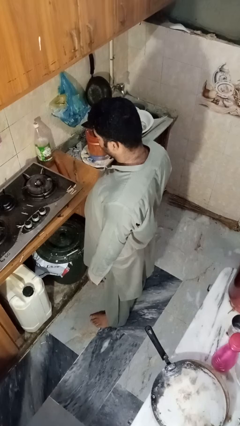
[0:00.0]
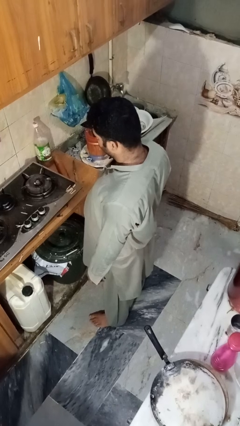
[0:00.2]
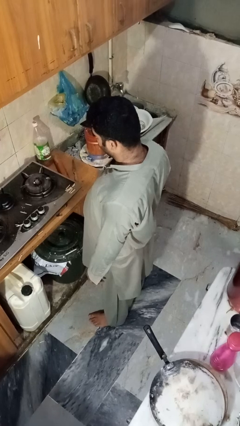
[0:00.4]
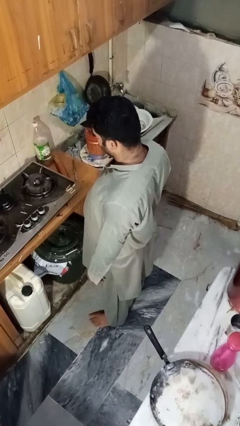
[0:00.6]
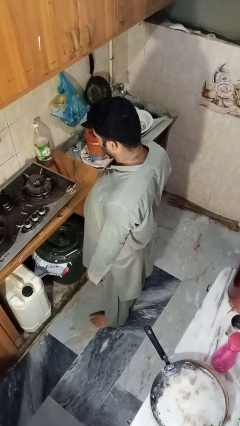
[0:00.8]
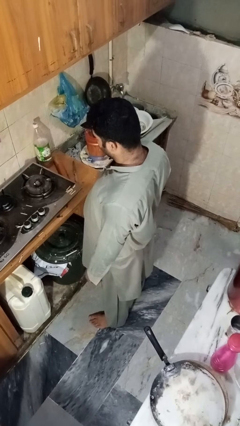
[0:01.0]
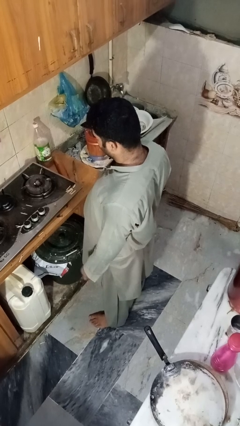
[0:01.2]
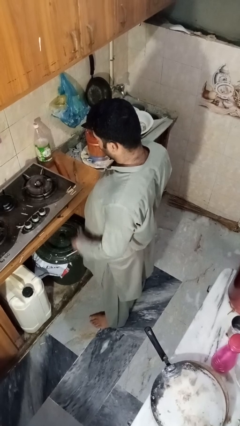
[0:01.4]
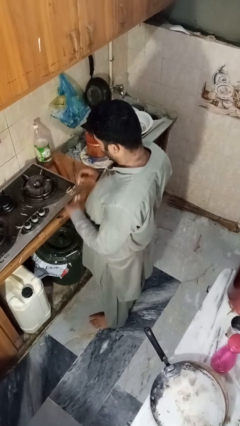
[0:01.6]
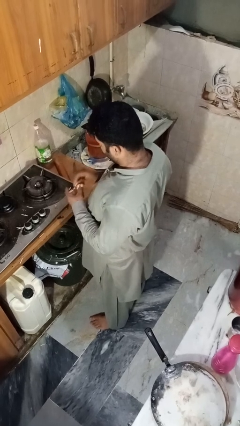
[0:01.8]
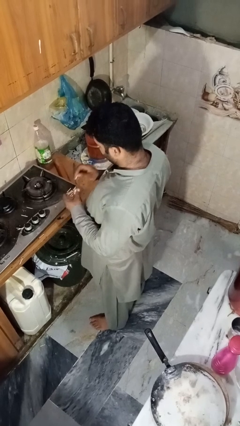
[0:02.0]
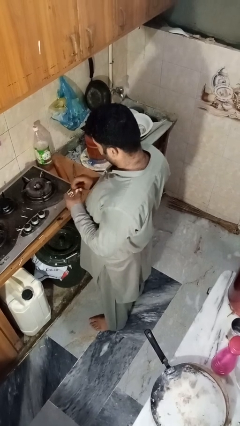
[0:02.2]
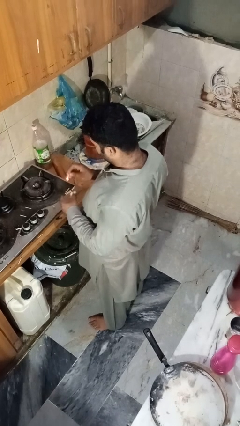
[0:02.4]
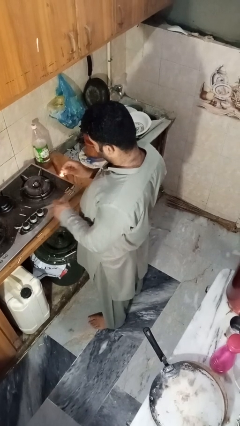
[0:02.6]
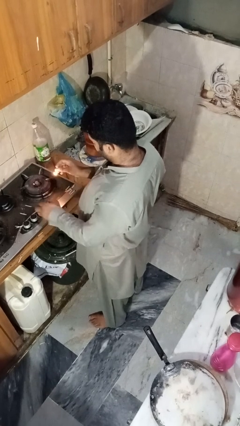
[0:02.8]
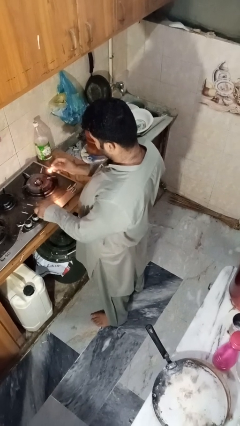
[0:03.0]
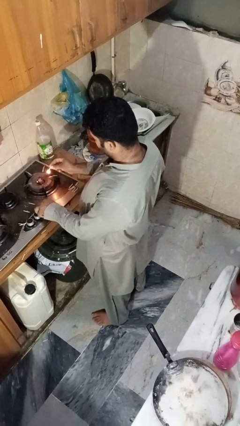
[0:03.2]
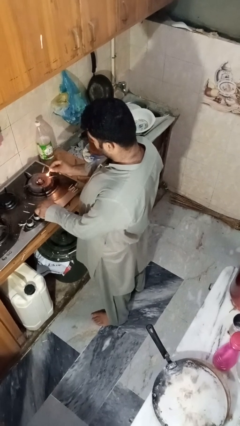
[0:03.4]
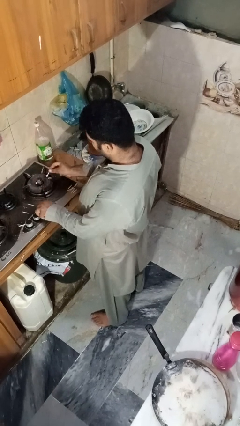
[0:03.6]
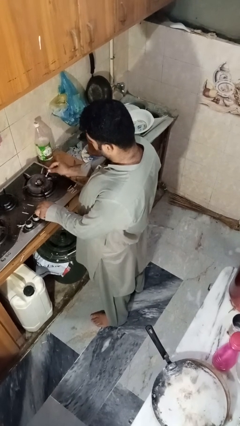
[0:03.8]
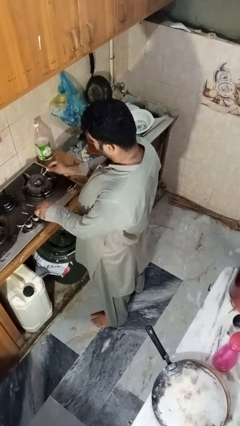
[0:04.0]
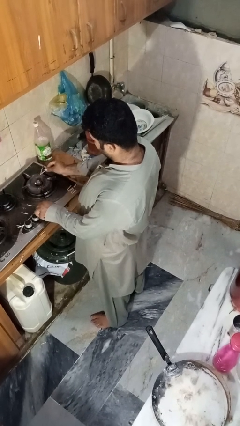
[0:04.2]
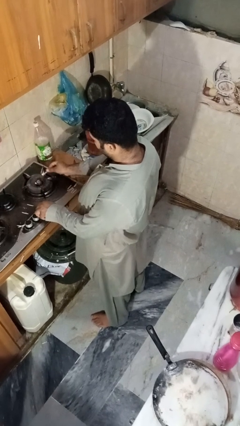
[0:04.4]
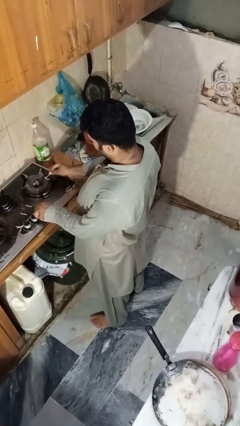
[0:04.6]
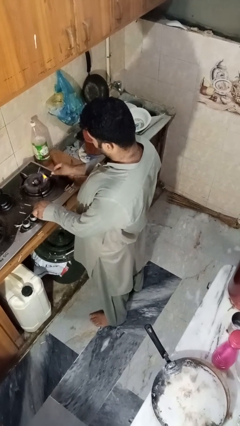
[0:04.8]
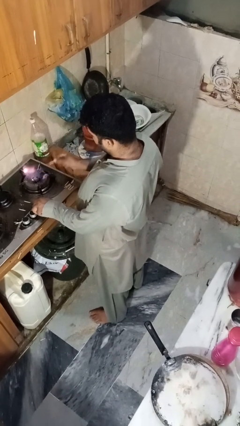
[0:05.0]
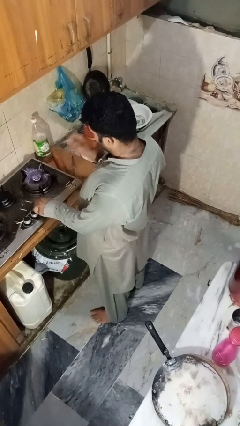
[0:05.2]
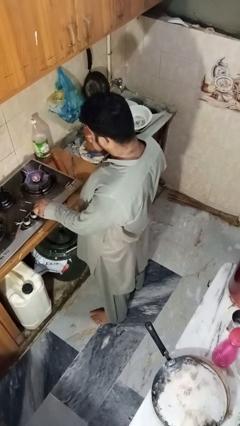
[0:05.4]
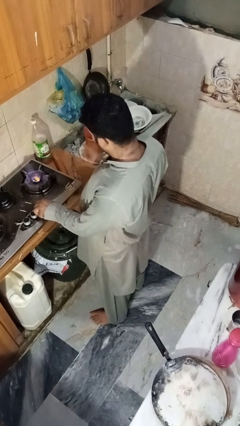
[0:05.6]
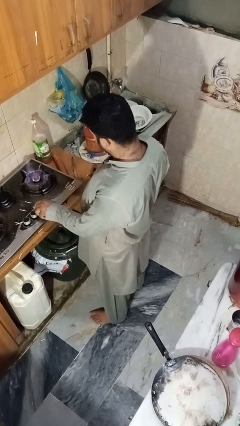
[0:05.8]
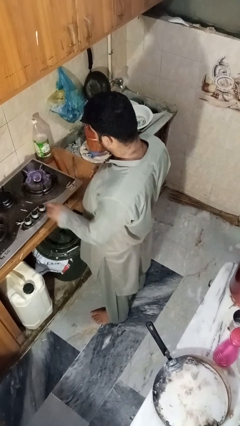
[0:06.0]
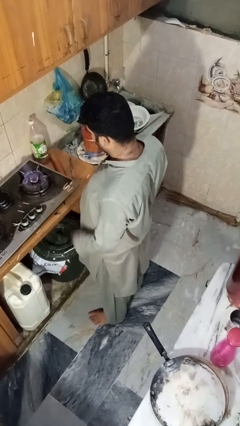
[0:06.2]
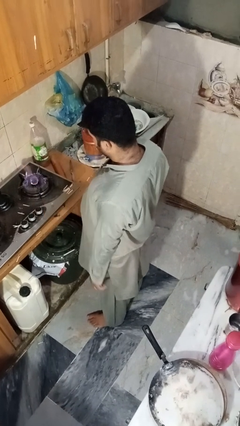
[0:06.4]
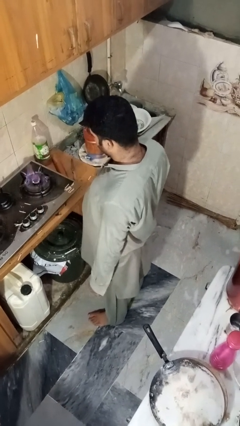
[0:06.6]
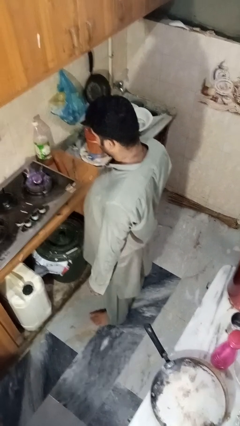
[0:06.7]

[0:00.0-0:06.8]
person turns on stovetop

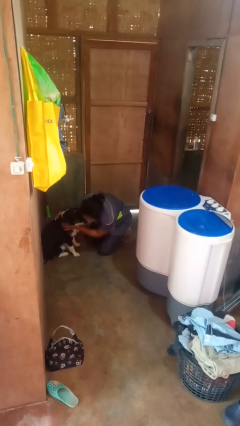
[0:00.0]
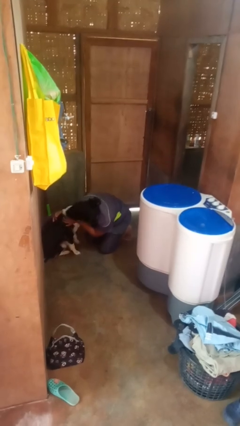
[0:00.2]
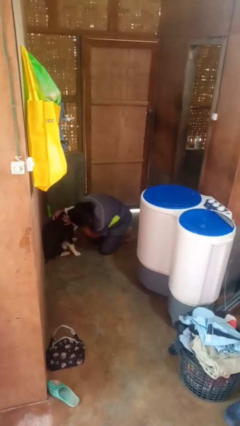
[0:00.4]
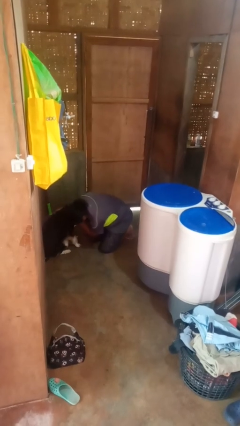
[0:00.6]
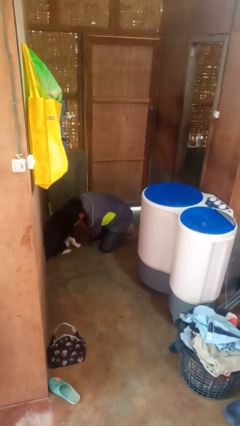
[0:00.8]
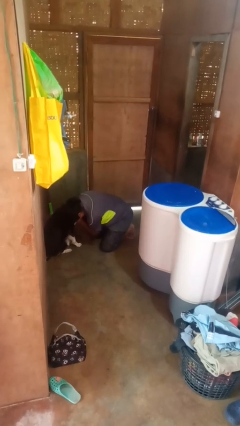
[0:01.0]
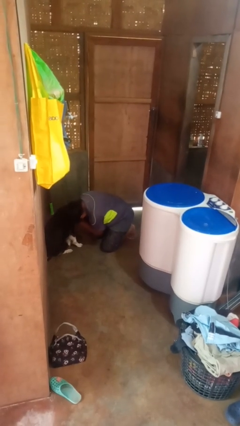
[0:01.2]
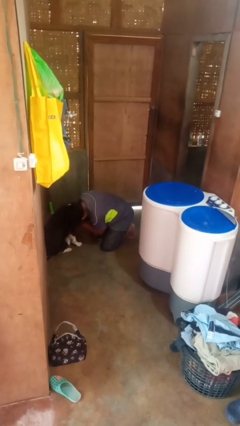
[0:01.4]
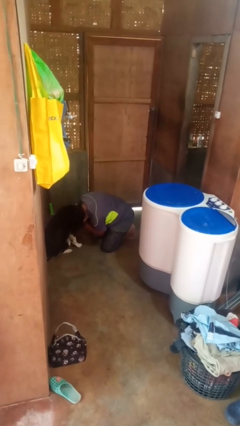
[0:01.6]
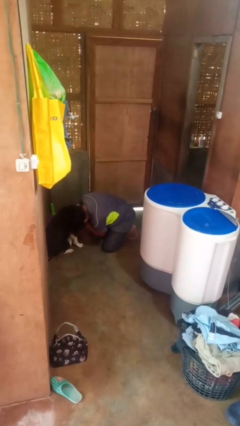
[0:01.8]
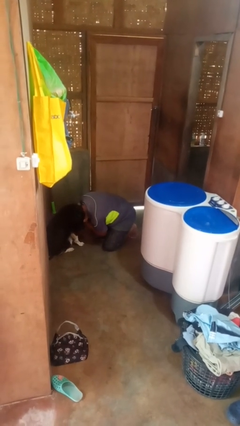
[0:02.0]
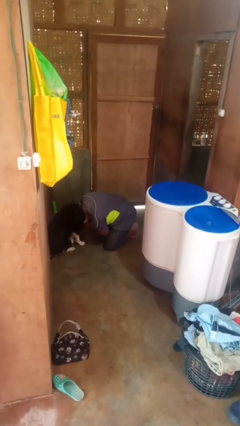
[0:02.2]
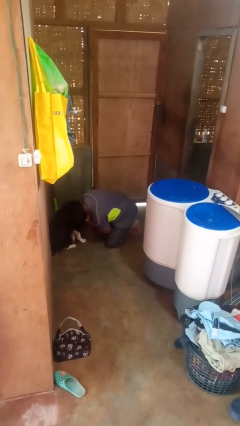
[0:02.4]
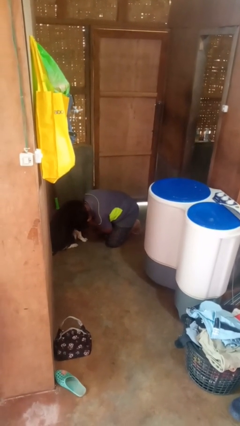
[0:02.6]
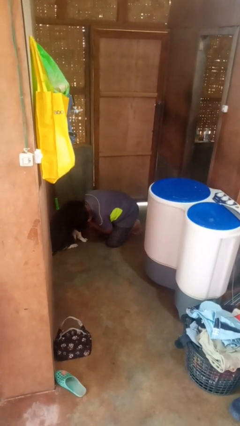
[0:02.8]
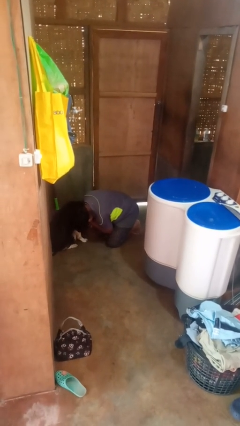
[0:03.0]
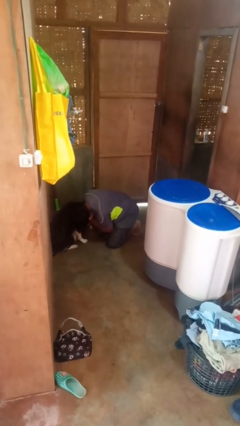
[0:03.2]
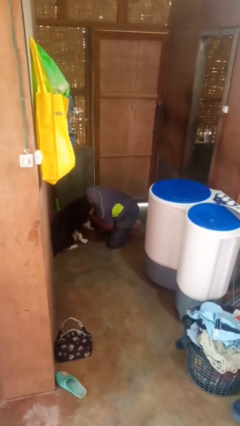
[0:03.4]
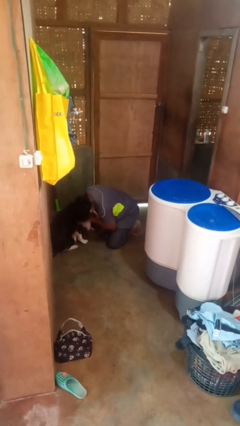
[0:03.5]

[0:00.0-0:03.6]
person hugs cat

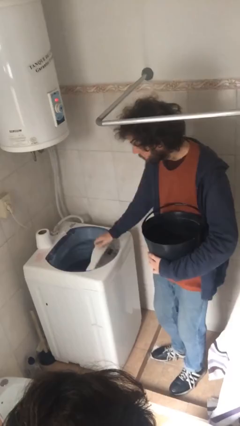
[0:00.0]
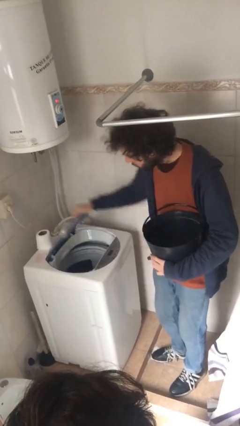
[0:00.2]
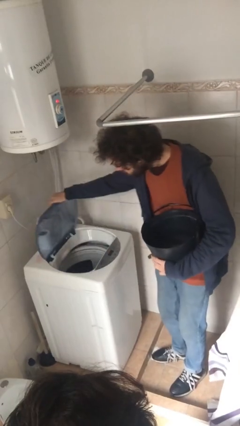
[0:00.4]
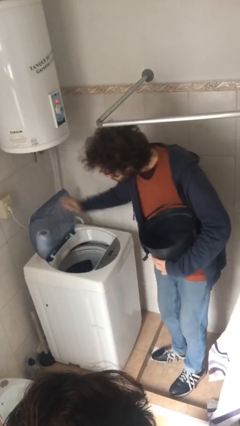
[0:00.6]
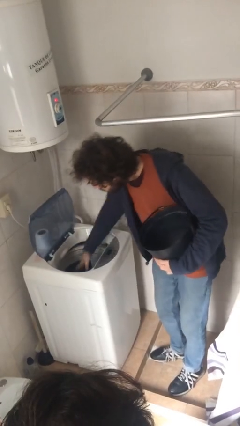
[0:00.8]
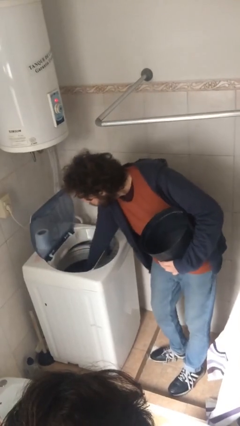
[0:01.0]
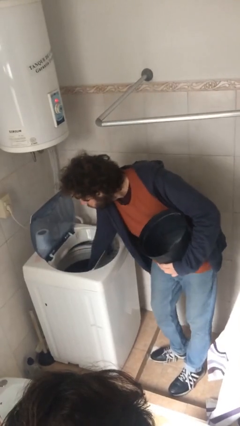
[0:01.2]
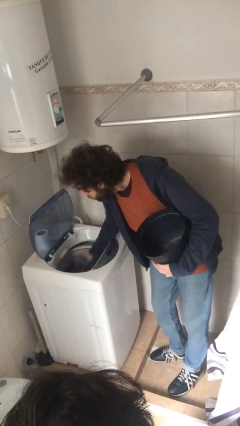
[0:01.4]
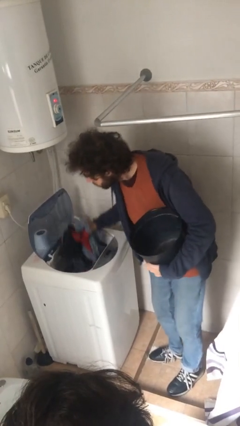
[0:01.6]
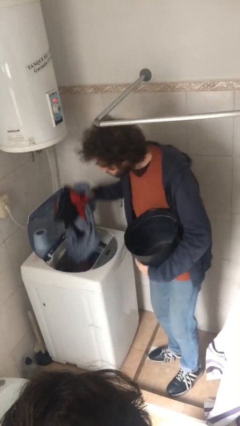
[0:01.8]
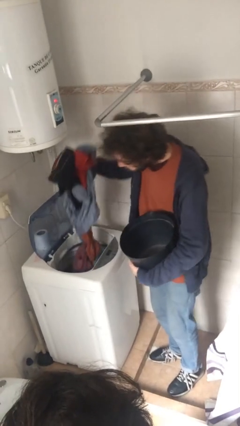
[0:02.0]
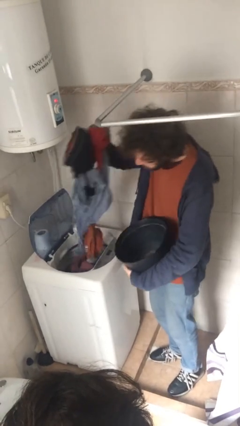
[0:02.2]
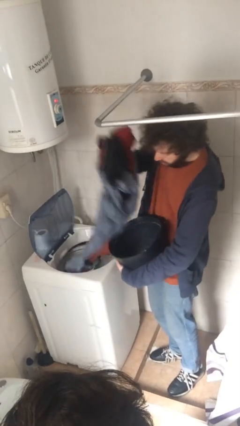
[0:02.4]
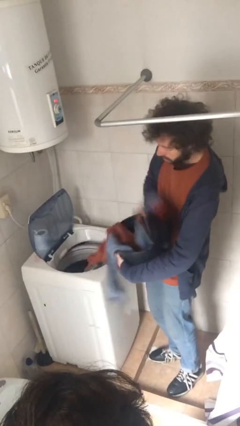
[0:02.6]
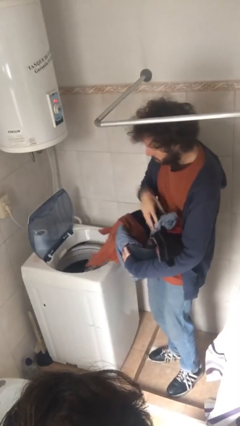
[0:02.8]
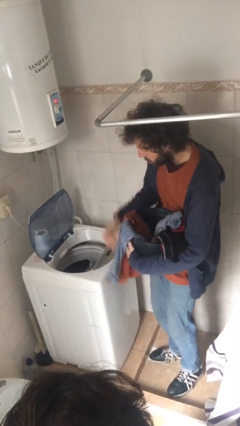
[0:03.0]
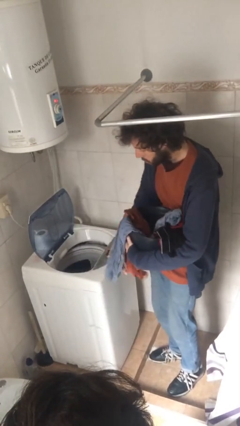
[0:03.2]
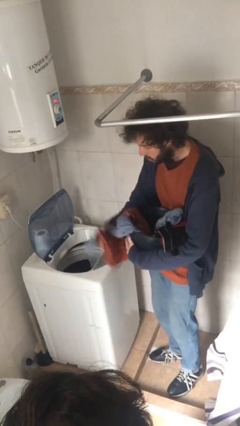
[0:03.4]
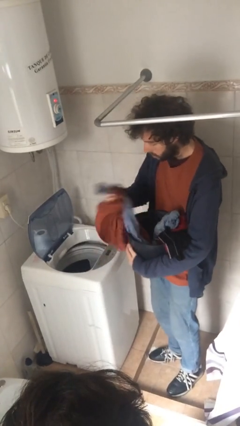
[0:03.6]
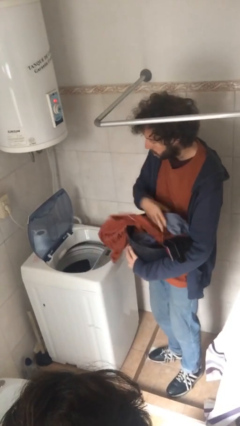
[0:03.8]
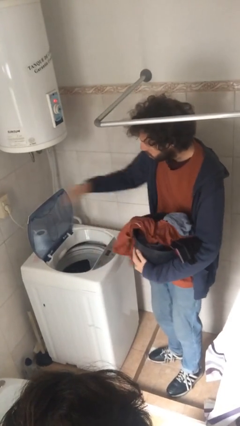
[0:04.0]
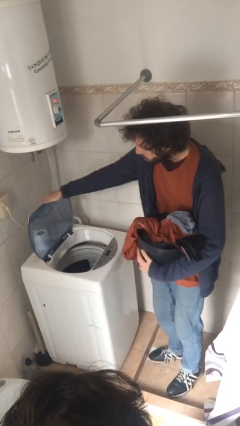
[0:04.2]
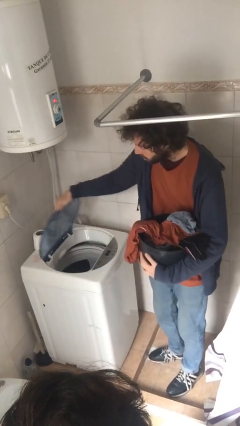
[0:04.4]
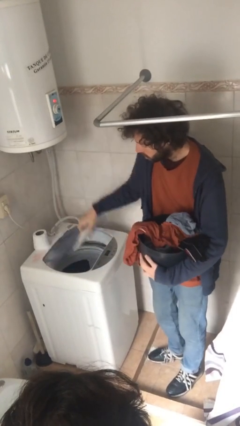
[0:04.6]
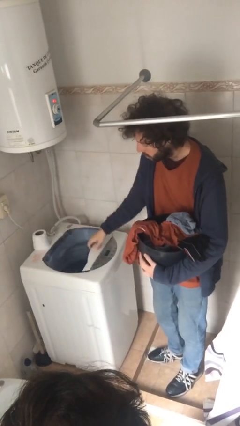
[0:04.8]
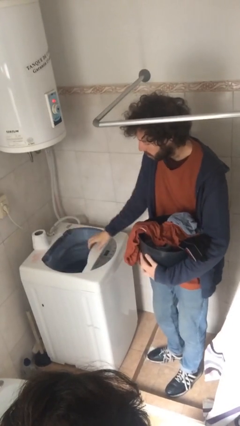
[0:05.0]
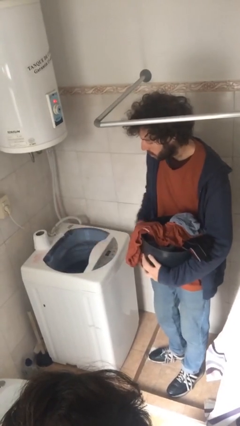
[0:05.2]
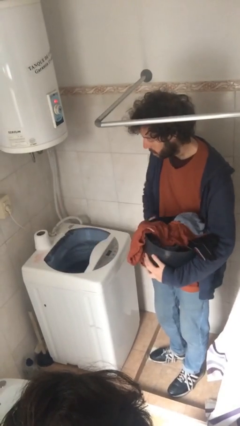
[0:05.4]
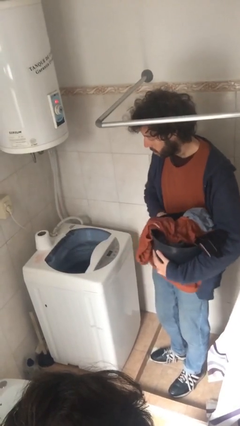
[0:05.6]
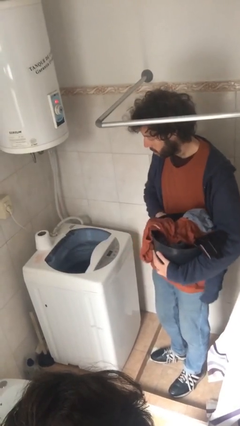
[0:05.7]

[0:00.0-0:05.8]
person loads clotheswasher

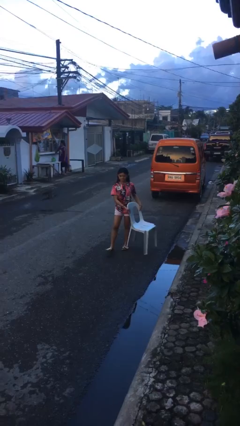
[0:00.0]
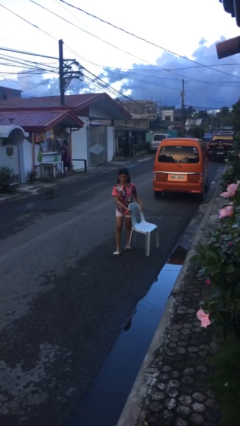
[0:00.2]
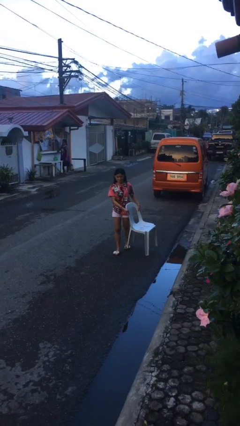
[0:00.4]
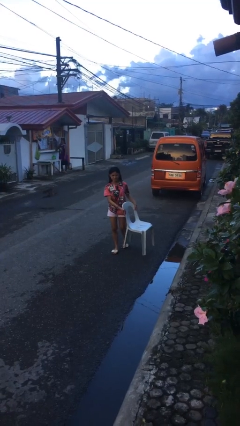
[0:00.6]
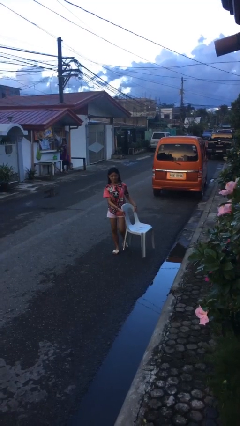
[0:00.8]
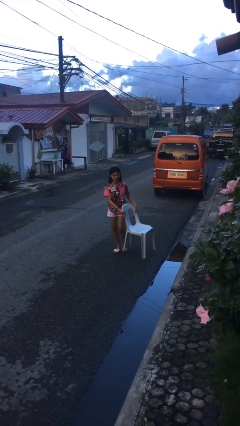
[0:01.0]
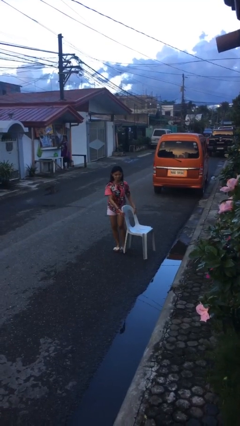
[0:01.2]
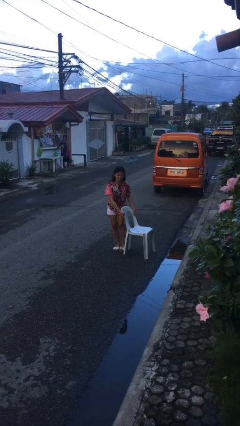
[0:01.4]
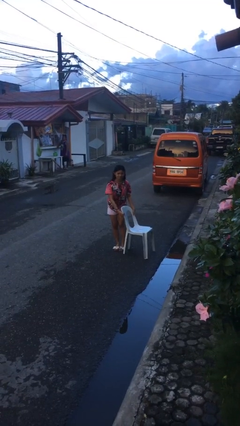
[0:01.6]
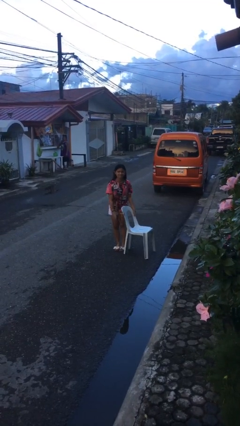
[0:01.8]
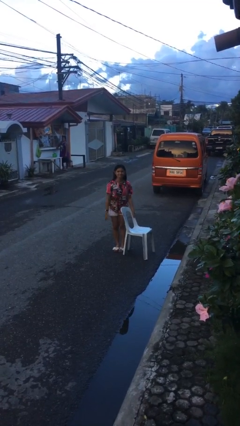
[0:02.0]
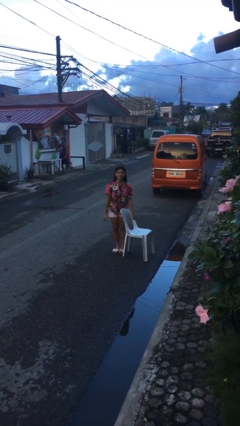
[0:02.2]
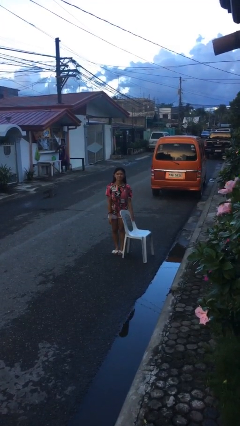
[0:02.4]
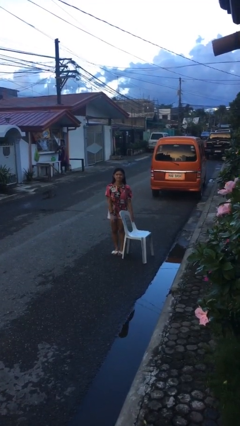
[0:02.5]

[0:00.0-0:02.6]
person puts down object on floor
